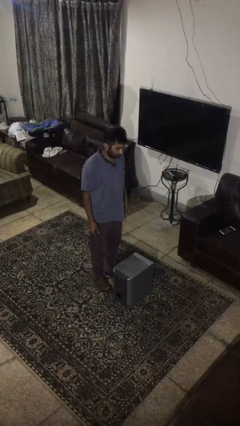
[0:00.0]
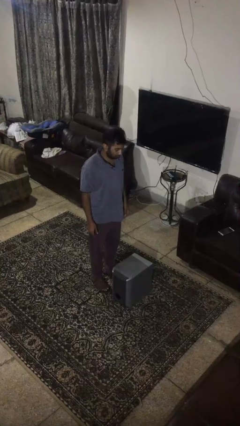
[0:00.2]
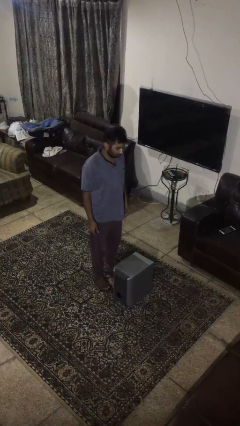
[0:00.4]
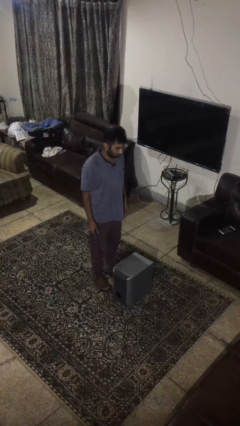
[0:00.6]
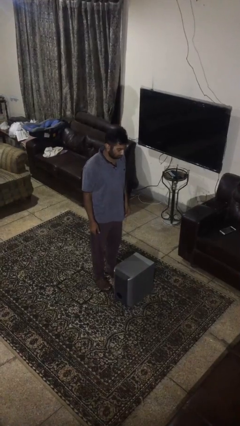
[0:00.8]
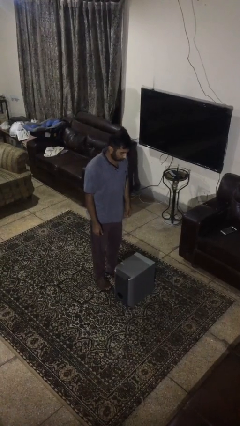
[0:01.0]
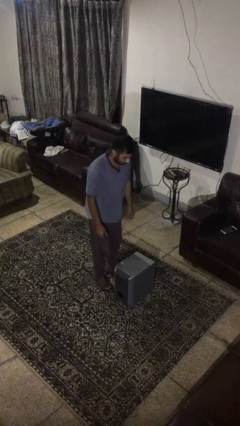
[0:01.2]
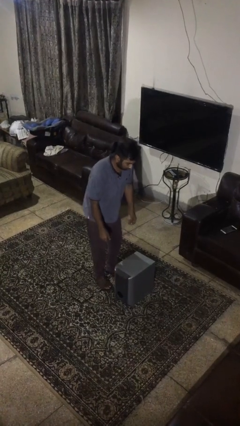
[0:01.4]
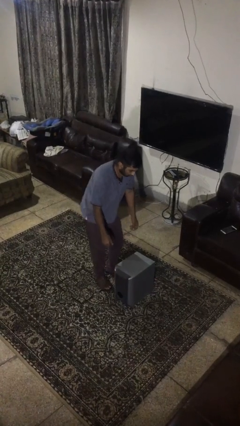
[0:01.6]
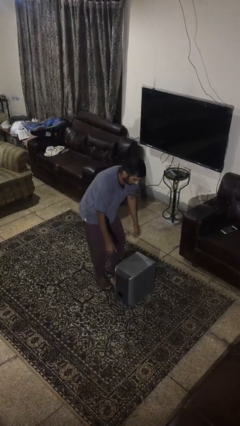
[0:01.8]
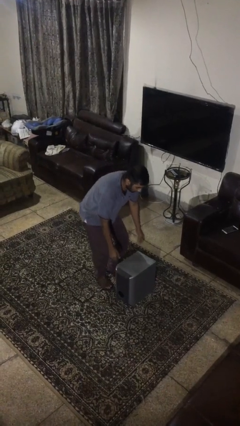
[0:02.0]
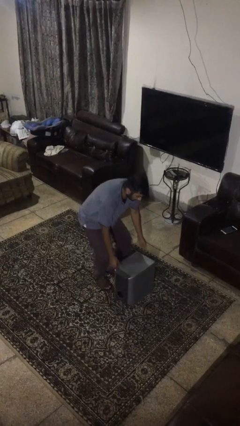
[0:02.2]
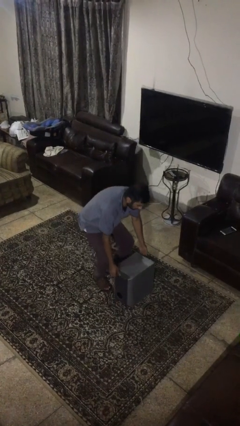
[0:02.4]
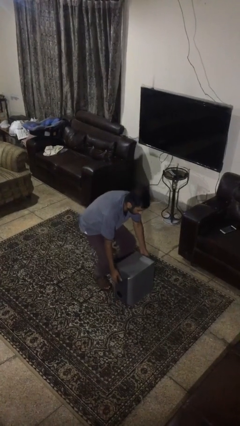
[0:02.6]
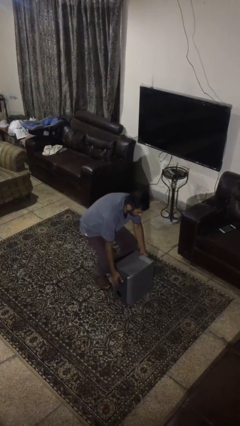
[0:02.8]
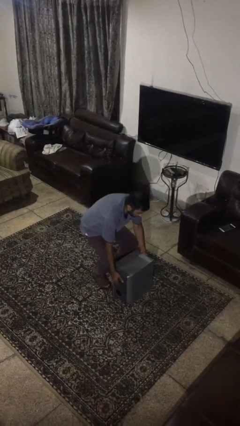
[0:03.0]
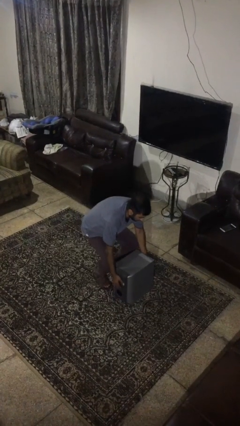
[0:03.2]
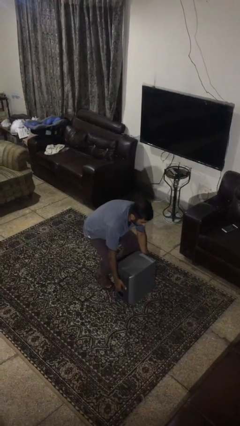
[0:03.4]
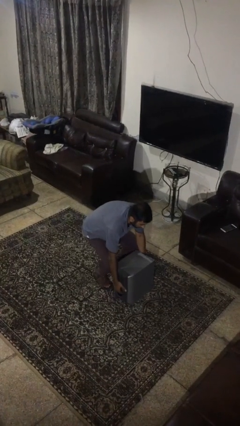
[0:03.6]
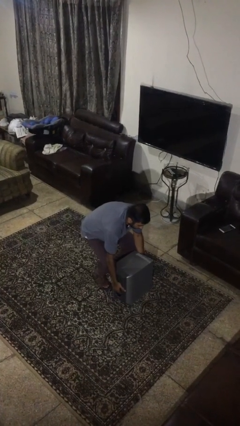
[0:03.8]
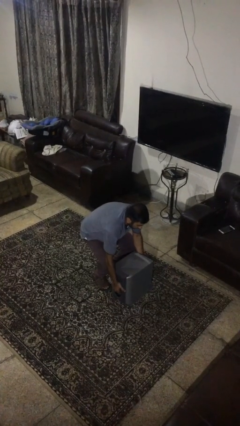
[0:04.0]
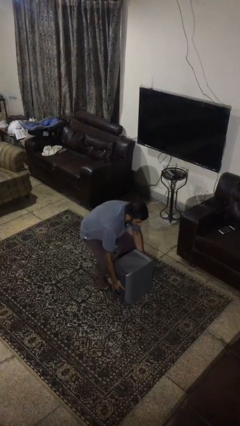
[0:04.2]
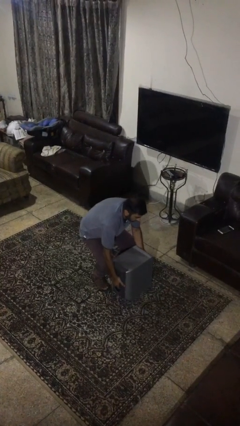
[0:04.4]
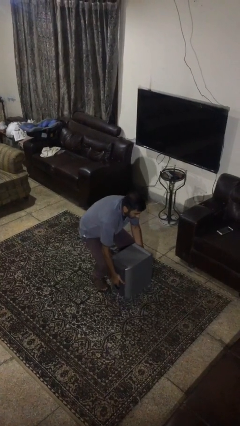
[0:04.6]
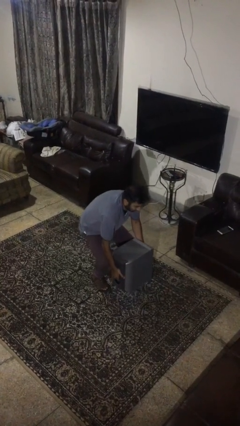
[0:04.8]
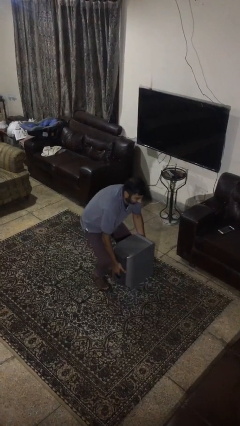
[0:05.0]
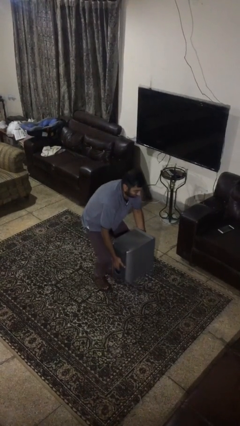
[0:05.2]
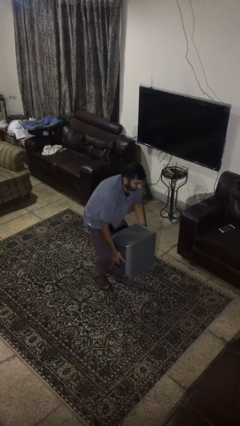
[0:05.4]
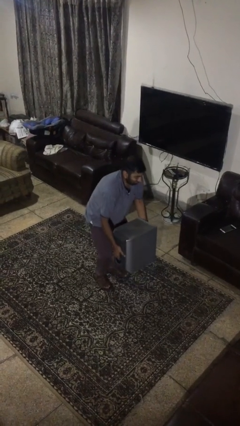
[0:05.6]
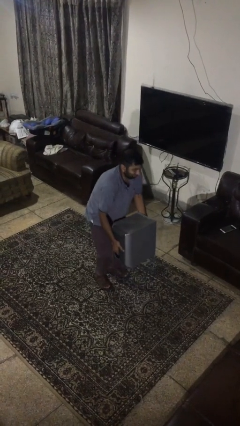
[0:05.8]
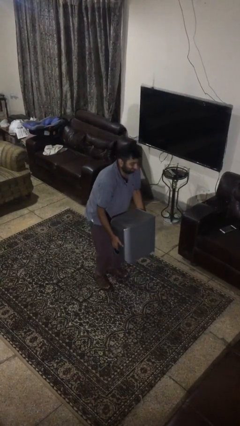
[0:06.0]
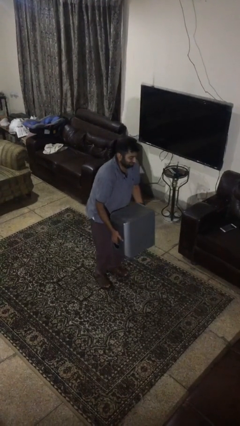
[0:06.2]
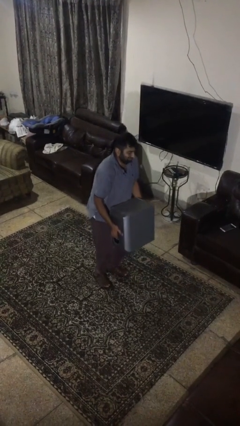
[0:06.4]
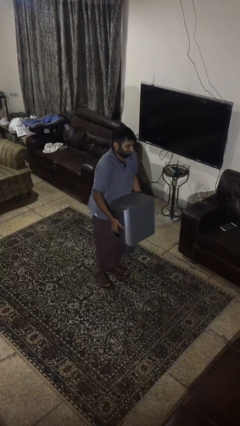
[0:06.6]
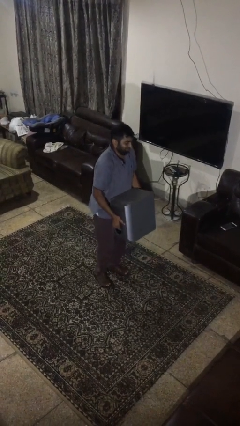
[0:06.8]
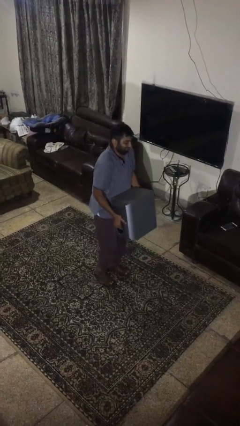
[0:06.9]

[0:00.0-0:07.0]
person picks up object from floor

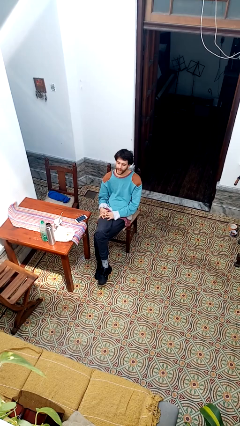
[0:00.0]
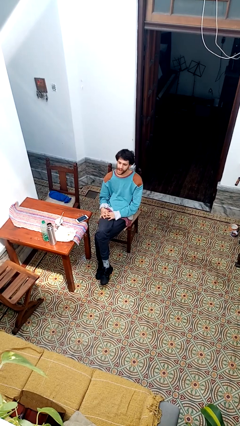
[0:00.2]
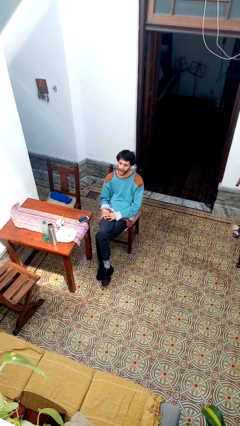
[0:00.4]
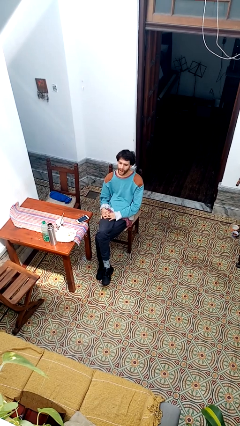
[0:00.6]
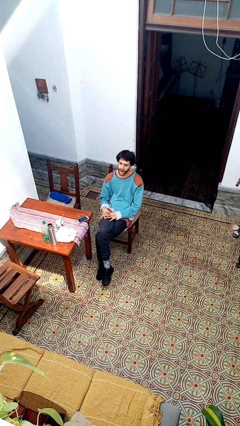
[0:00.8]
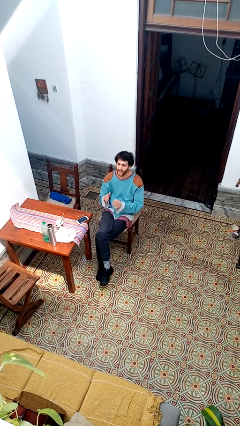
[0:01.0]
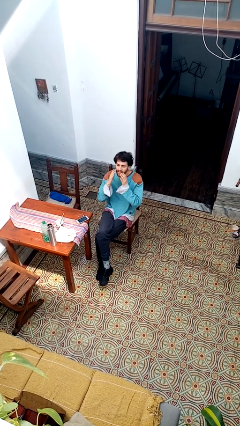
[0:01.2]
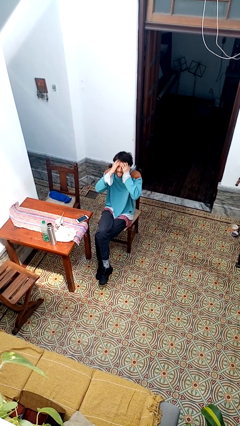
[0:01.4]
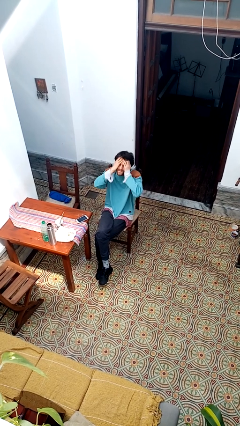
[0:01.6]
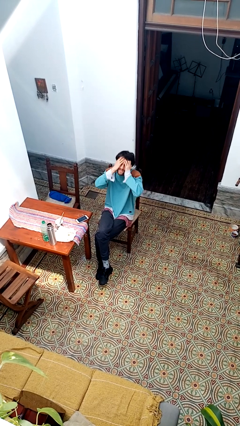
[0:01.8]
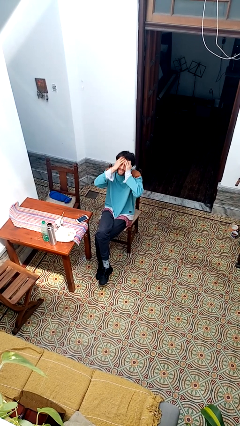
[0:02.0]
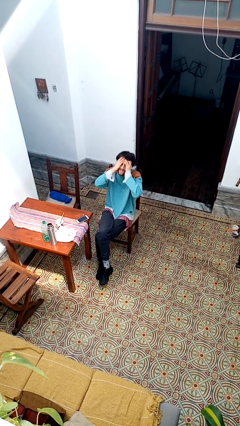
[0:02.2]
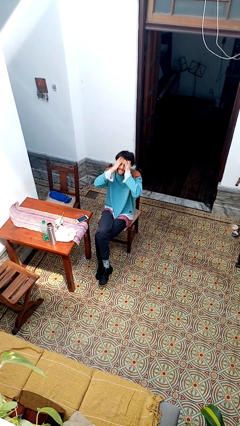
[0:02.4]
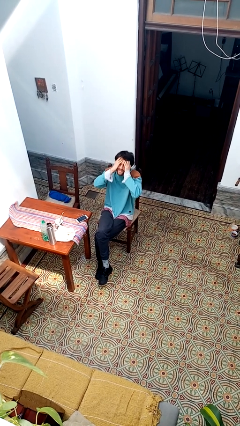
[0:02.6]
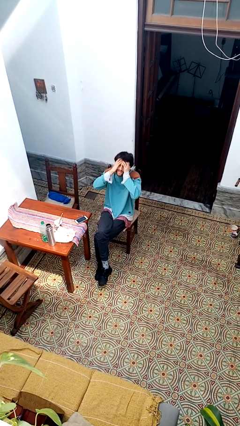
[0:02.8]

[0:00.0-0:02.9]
person covers face with hands

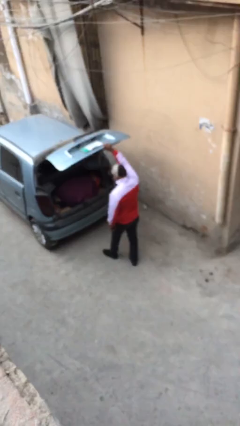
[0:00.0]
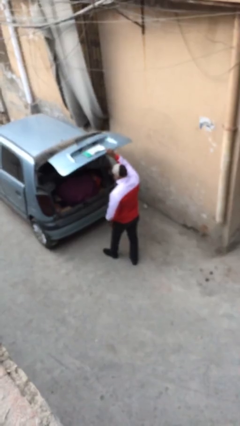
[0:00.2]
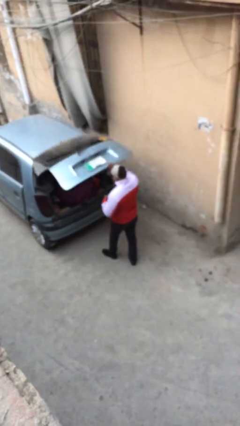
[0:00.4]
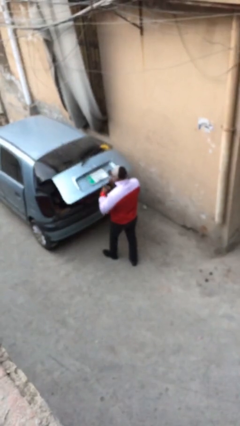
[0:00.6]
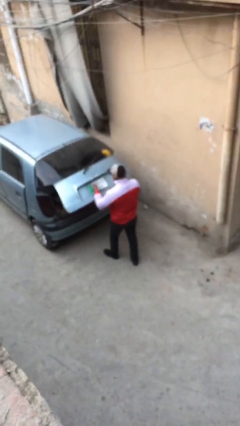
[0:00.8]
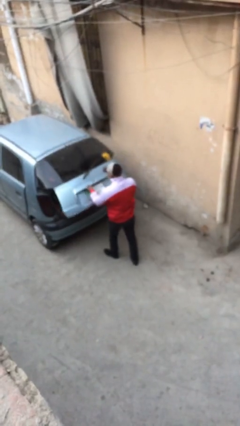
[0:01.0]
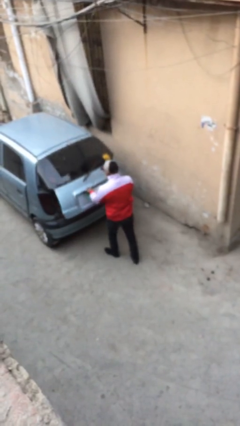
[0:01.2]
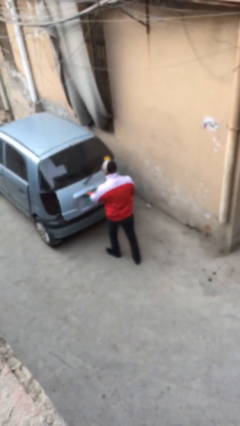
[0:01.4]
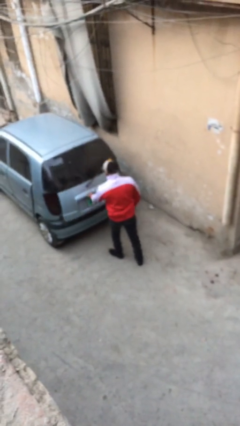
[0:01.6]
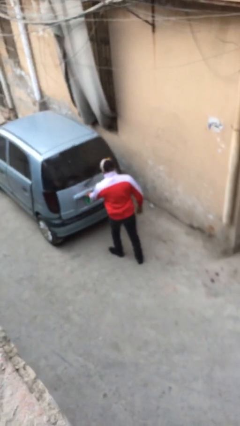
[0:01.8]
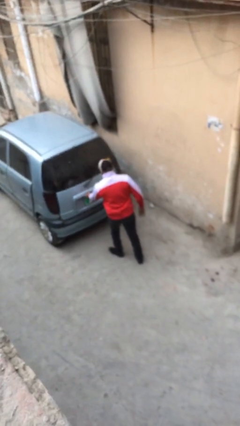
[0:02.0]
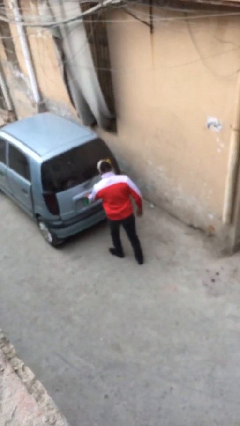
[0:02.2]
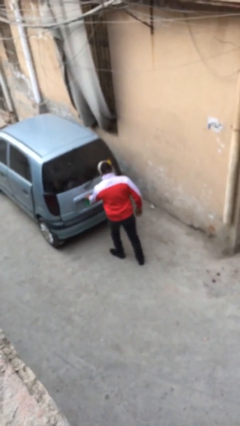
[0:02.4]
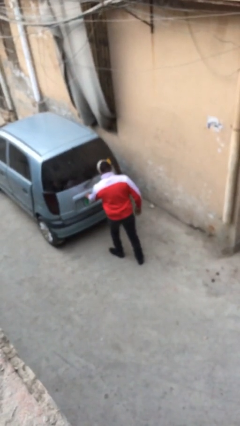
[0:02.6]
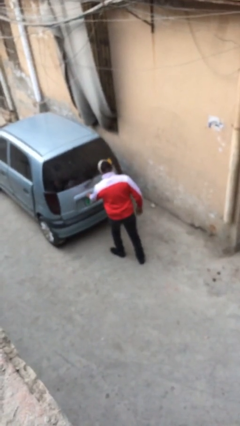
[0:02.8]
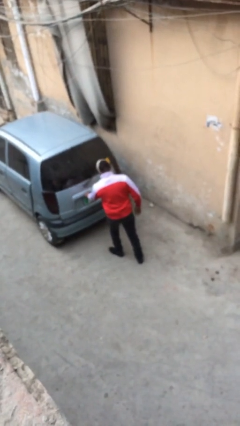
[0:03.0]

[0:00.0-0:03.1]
person closes car trunk

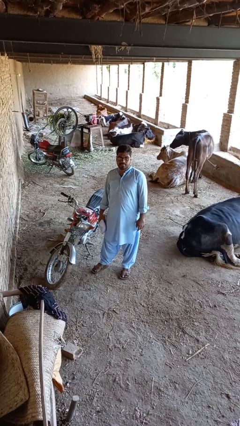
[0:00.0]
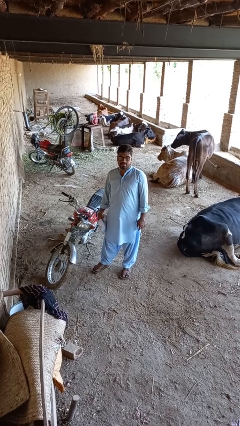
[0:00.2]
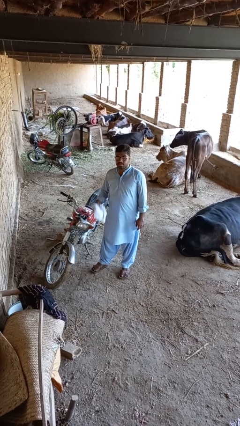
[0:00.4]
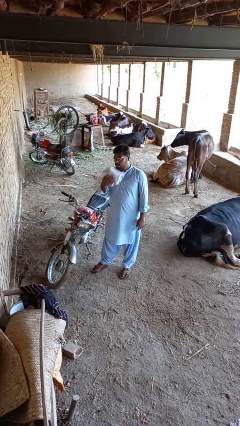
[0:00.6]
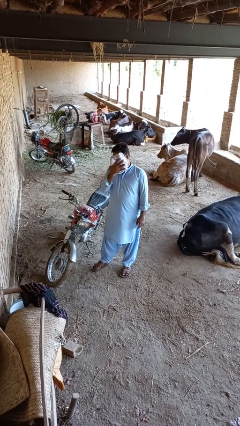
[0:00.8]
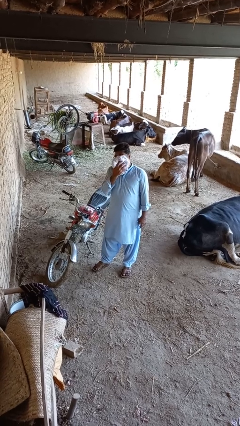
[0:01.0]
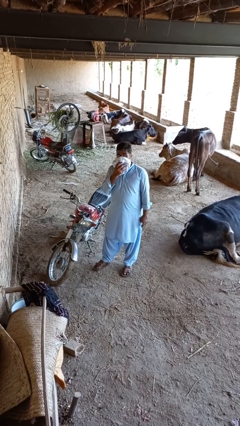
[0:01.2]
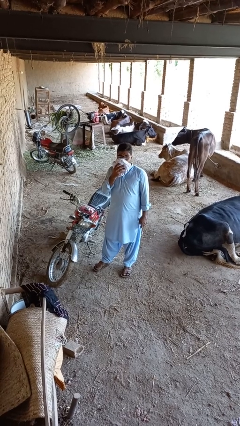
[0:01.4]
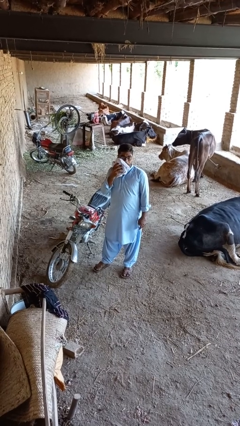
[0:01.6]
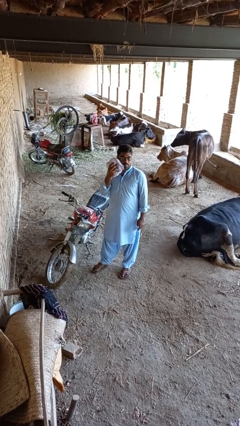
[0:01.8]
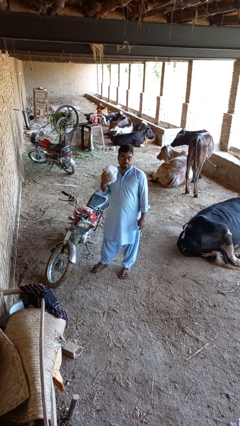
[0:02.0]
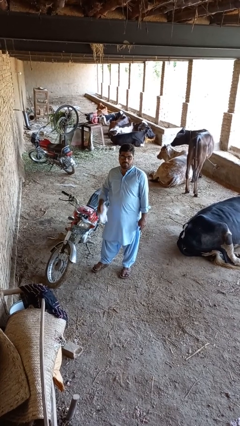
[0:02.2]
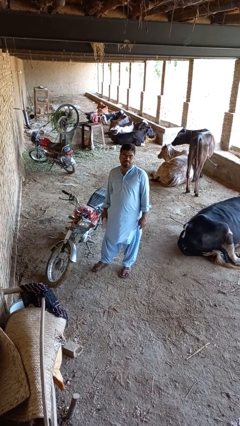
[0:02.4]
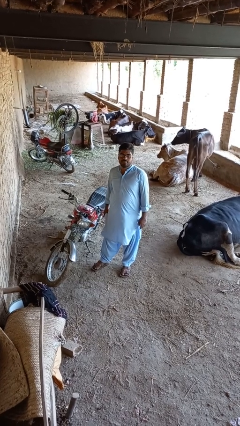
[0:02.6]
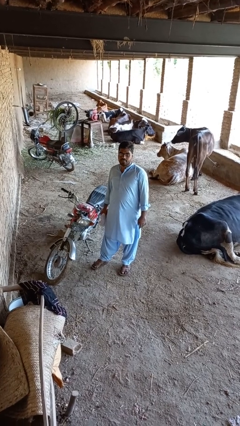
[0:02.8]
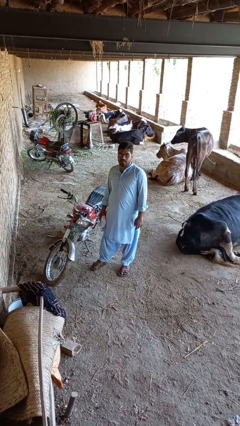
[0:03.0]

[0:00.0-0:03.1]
person wipes mouth with napkin

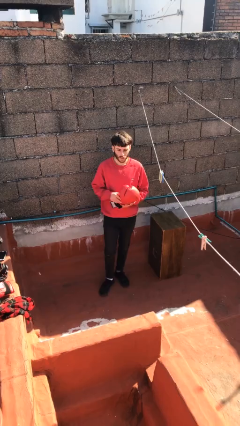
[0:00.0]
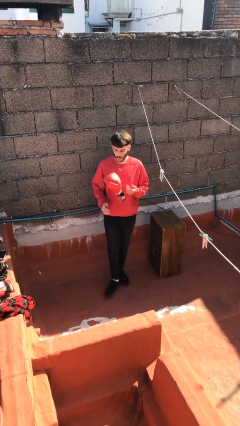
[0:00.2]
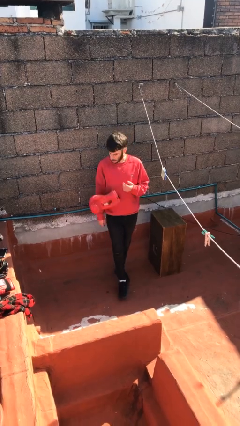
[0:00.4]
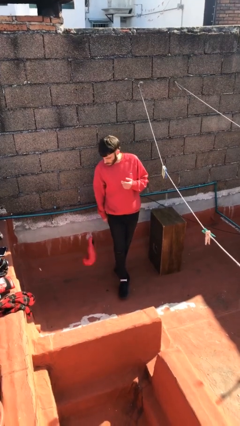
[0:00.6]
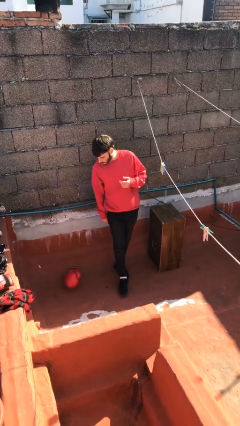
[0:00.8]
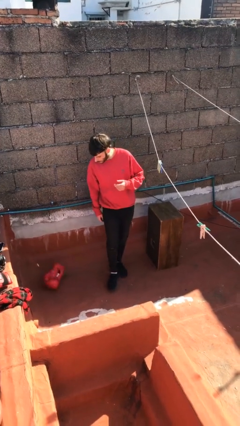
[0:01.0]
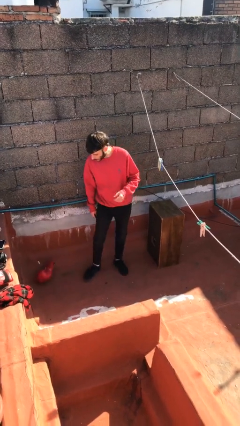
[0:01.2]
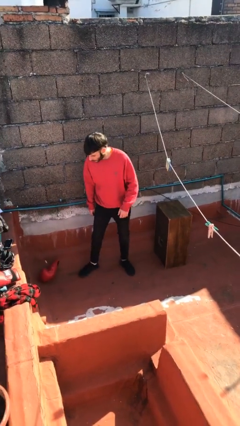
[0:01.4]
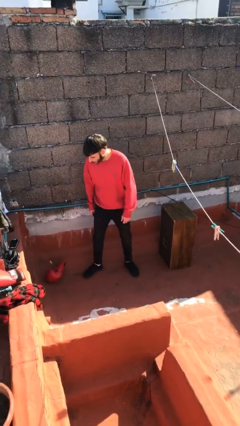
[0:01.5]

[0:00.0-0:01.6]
person drops object
